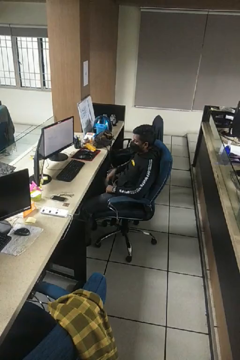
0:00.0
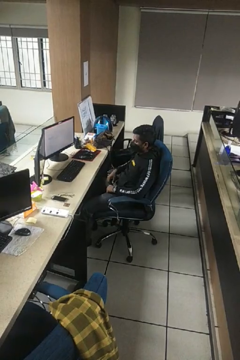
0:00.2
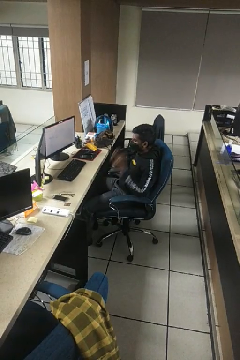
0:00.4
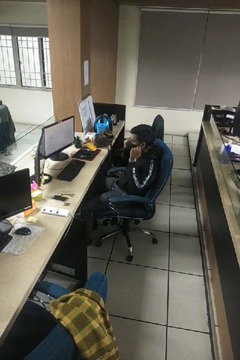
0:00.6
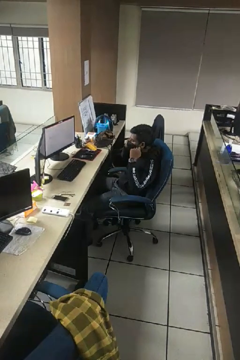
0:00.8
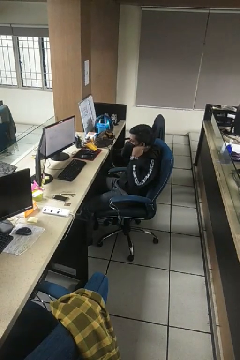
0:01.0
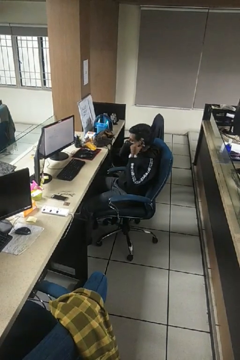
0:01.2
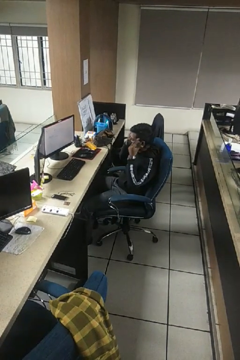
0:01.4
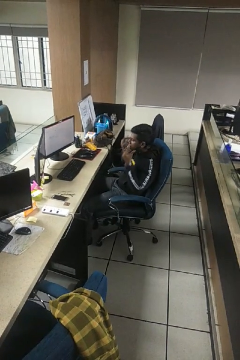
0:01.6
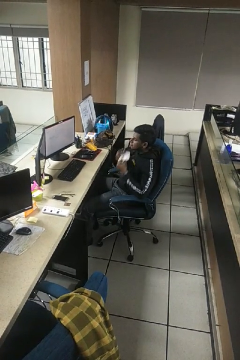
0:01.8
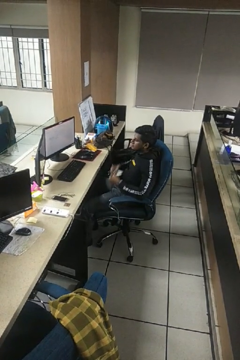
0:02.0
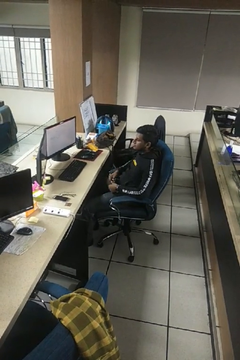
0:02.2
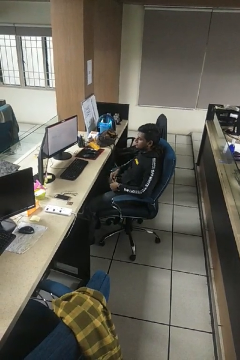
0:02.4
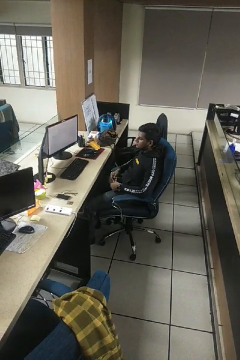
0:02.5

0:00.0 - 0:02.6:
person takes off facemask

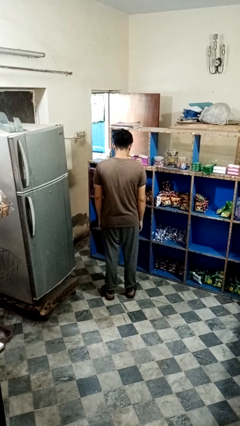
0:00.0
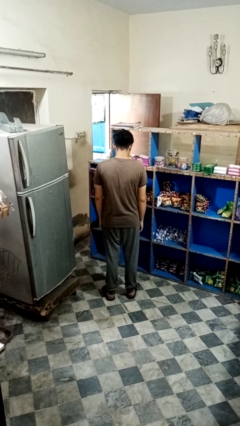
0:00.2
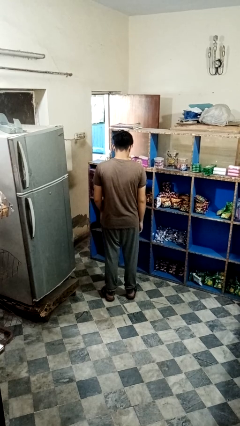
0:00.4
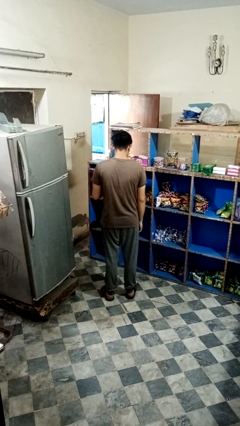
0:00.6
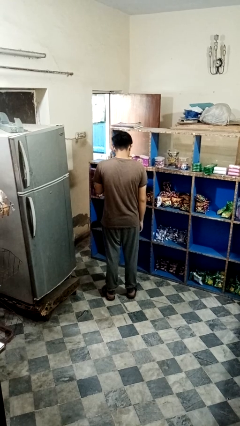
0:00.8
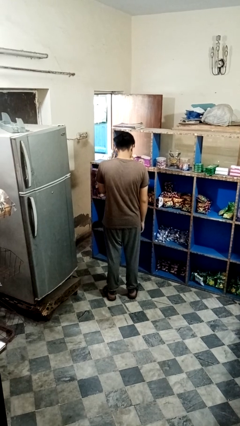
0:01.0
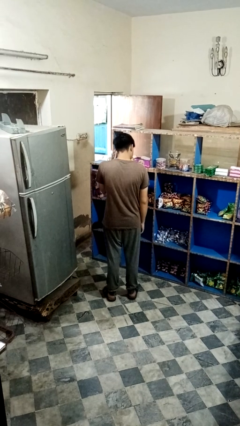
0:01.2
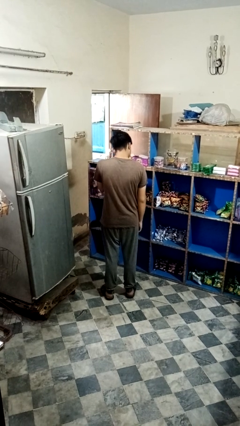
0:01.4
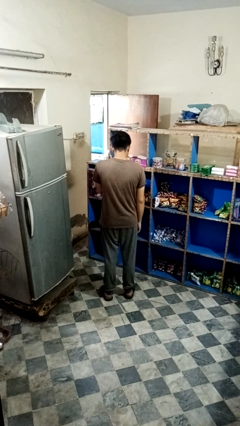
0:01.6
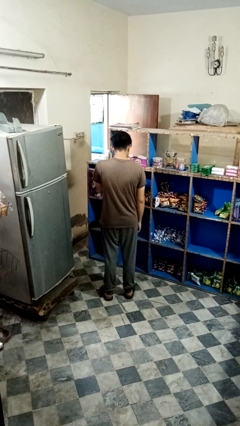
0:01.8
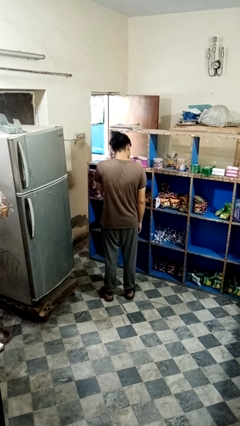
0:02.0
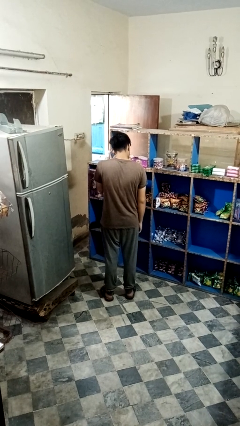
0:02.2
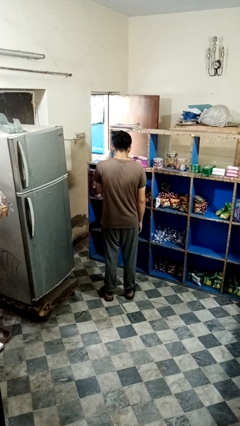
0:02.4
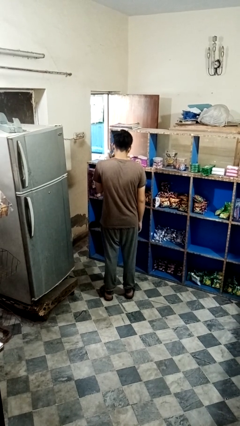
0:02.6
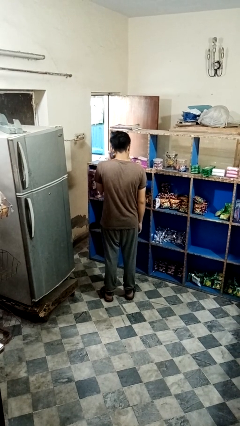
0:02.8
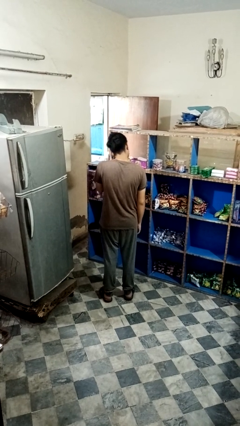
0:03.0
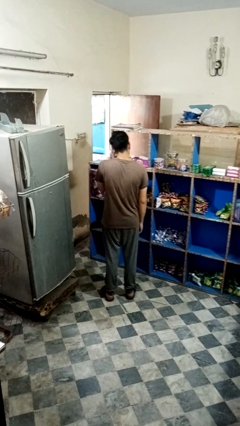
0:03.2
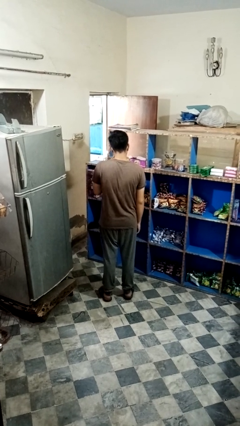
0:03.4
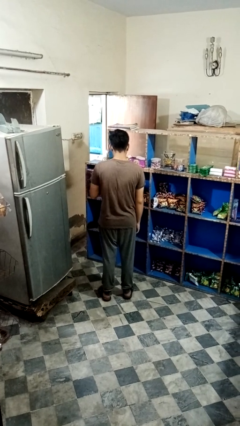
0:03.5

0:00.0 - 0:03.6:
person rubs eyes

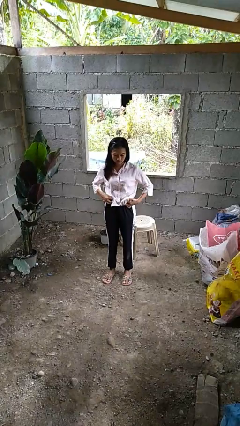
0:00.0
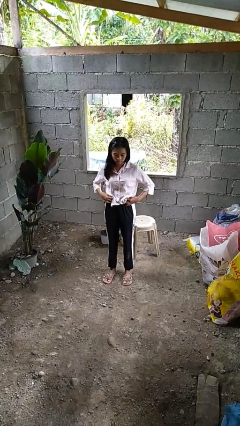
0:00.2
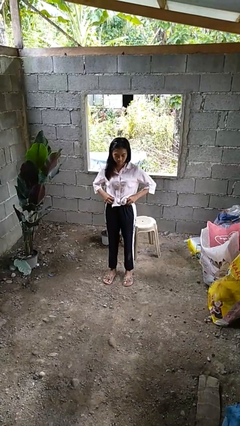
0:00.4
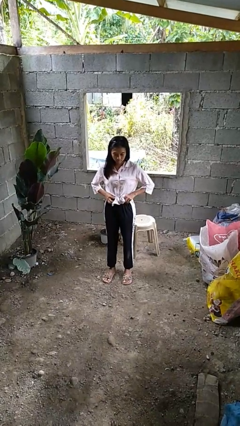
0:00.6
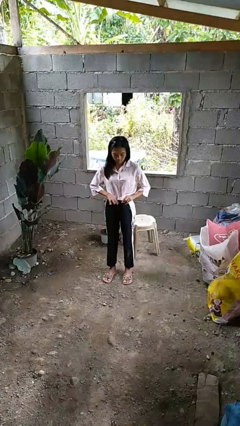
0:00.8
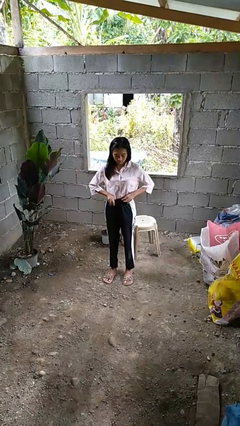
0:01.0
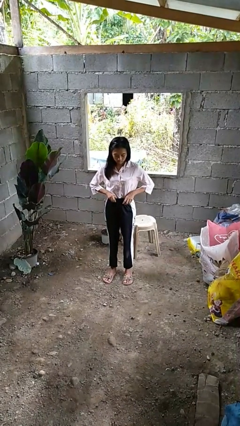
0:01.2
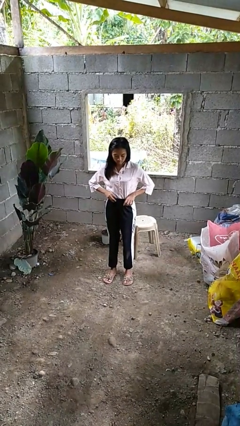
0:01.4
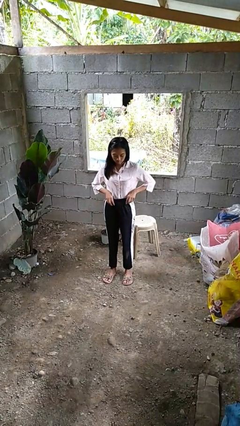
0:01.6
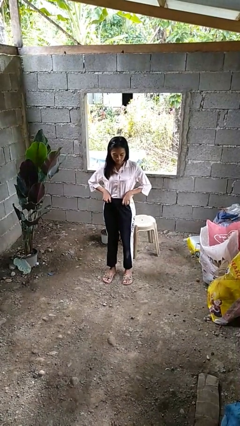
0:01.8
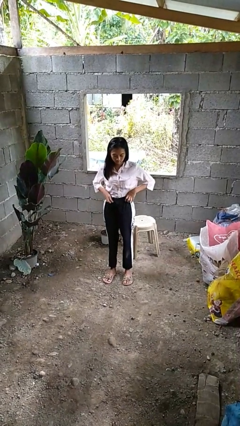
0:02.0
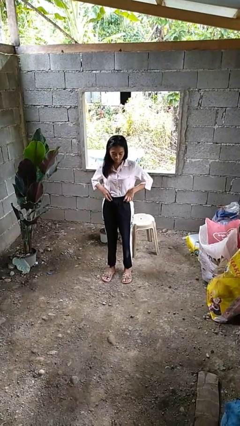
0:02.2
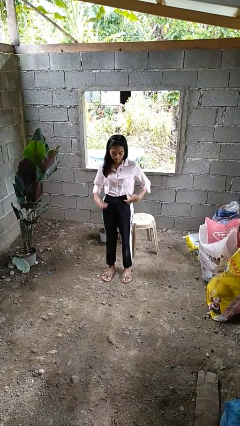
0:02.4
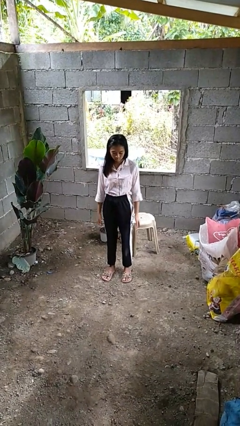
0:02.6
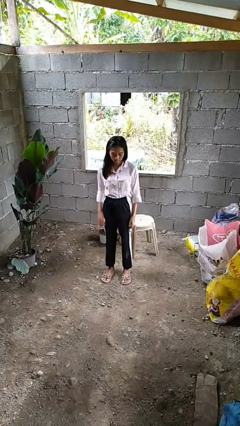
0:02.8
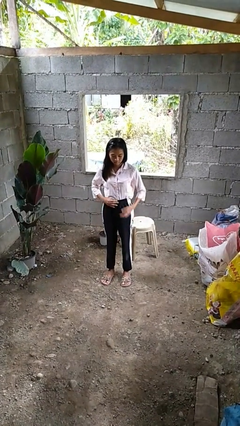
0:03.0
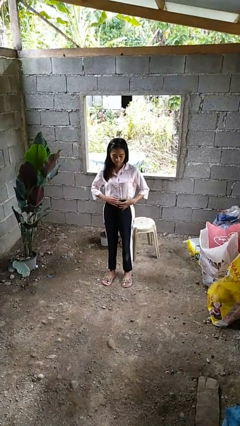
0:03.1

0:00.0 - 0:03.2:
person tucks in shirt

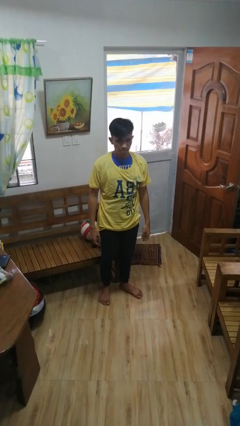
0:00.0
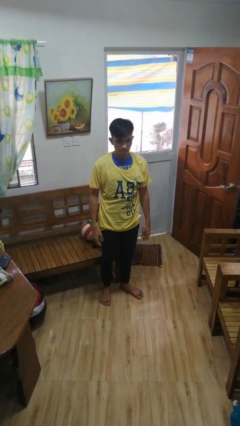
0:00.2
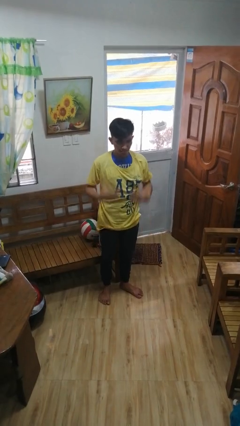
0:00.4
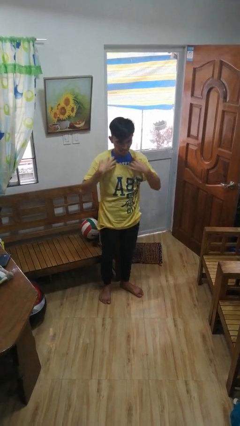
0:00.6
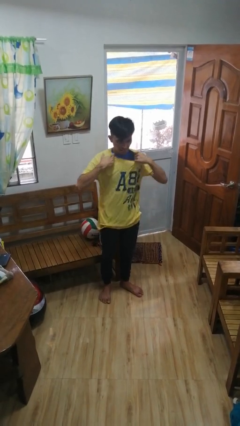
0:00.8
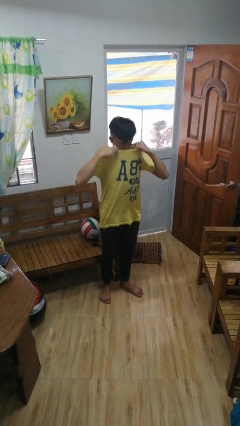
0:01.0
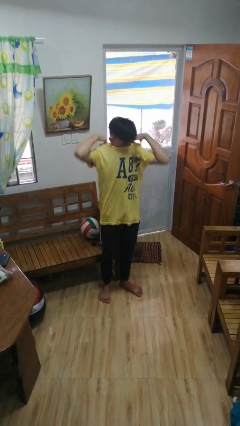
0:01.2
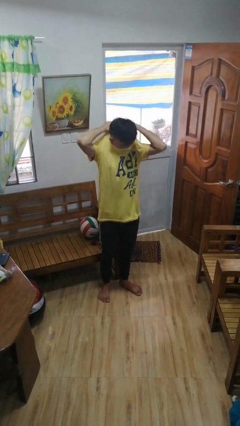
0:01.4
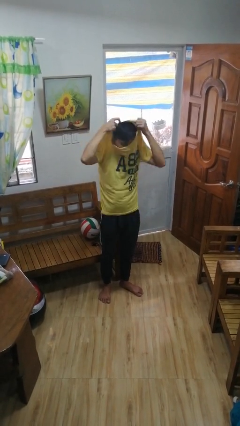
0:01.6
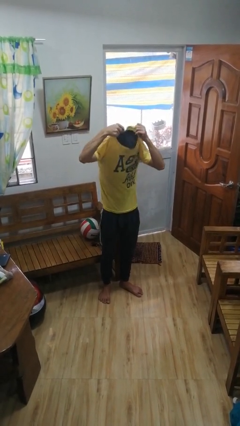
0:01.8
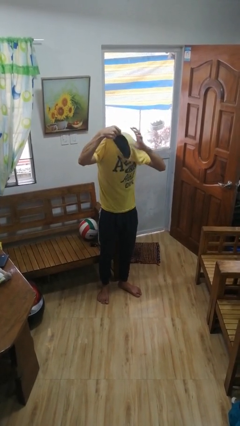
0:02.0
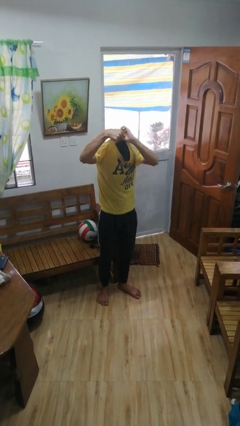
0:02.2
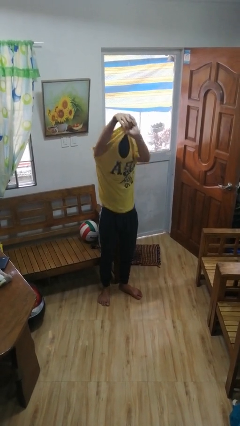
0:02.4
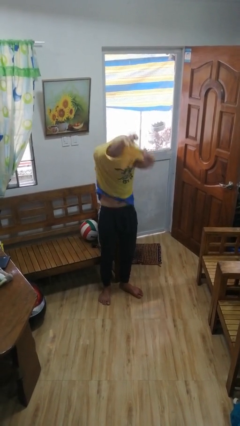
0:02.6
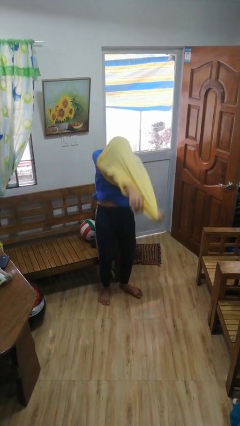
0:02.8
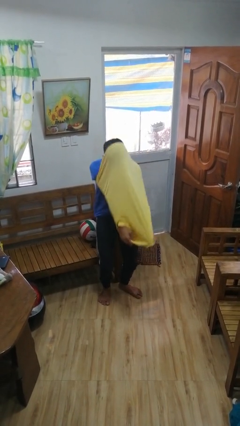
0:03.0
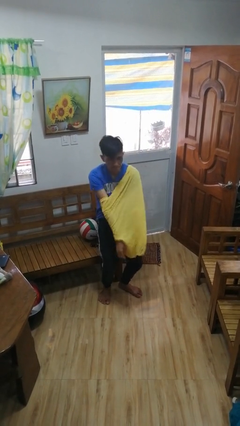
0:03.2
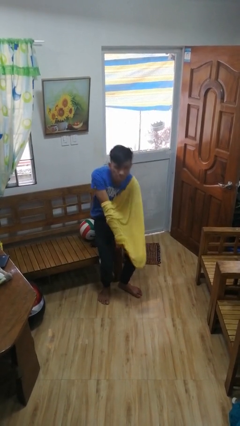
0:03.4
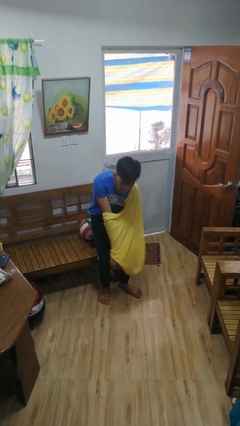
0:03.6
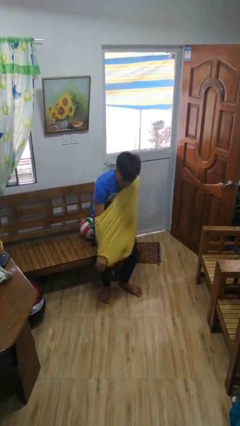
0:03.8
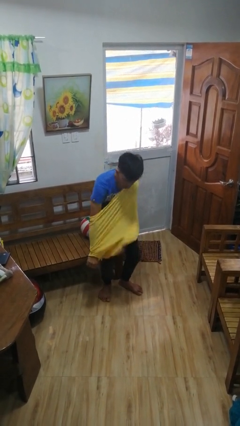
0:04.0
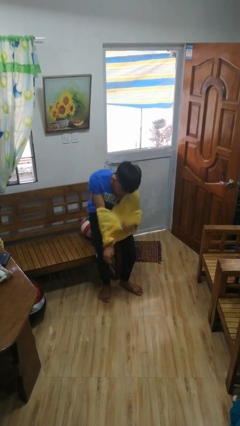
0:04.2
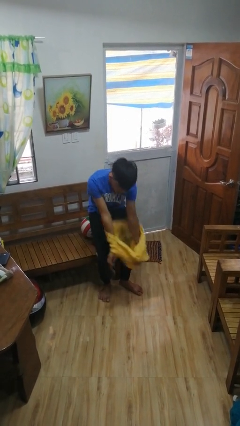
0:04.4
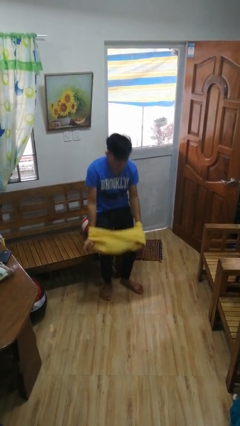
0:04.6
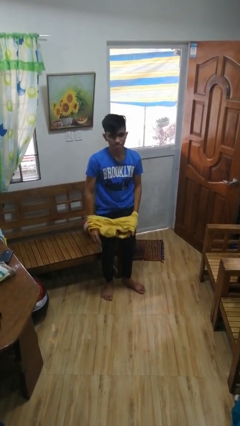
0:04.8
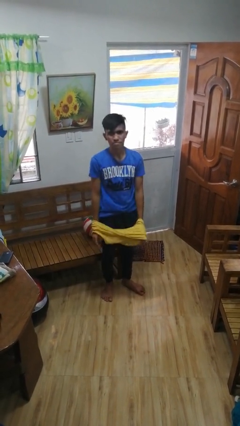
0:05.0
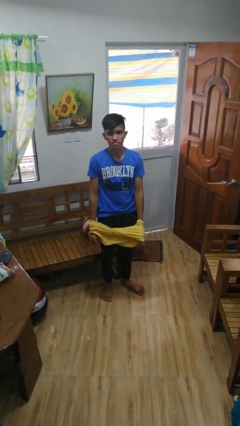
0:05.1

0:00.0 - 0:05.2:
person takes off shirt

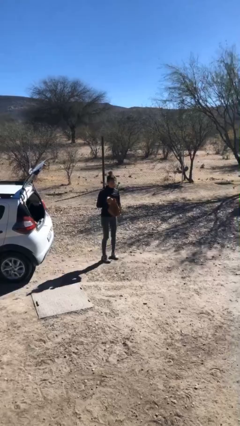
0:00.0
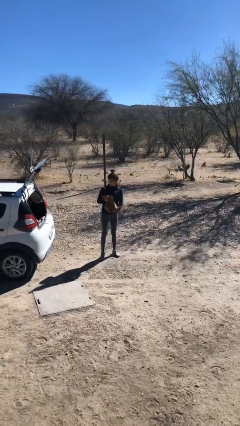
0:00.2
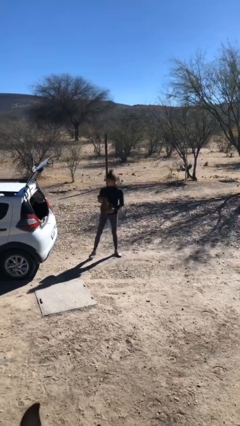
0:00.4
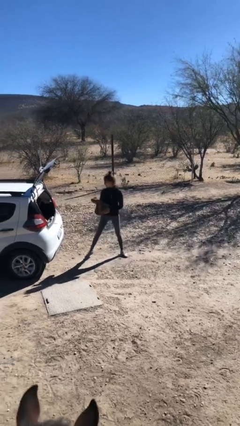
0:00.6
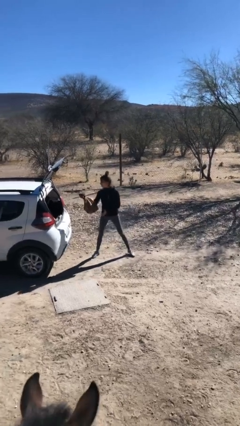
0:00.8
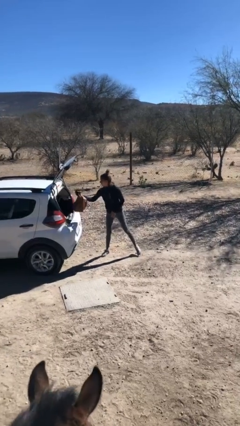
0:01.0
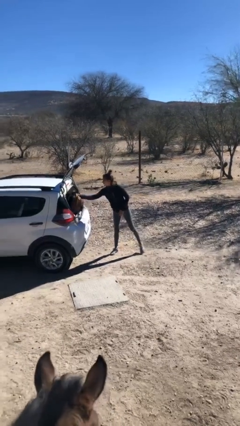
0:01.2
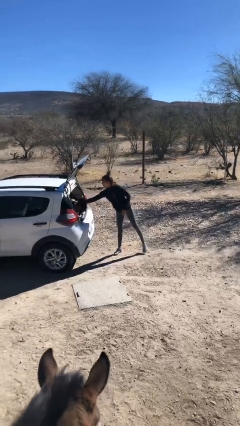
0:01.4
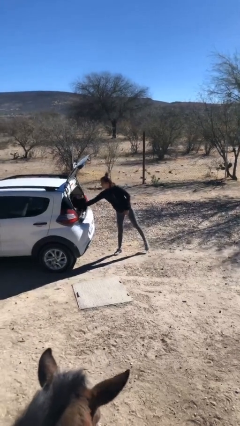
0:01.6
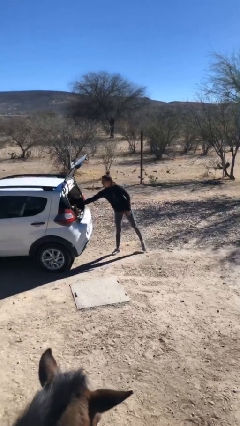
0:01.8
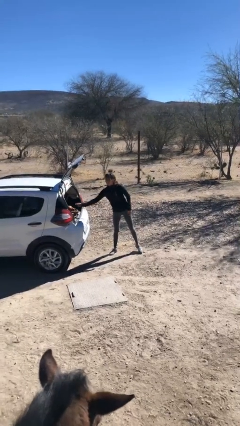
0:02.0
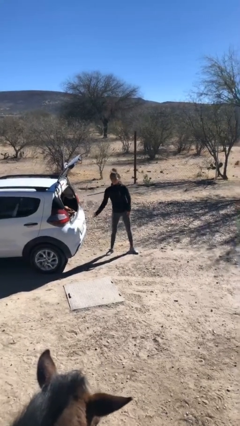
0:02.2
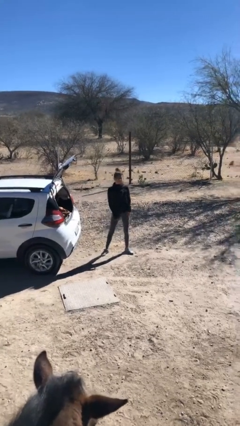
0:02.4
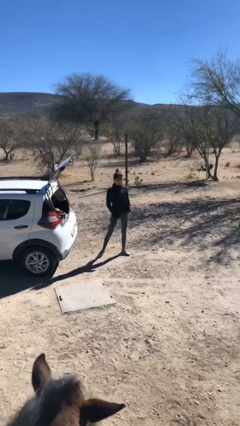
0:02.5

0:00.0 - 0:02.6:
person loads car

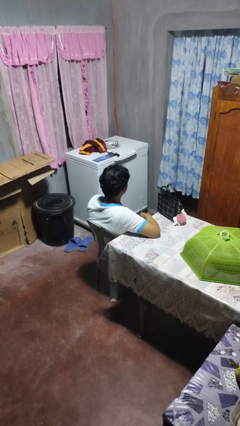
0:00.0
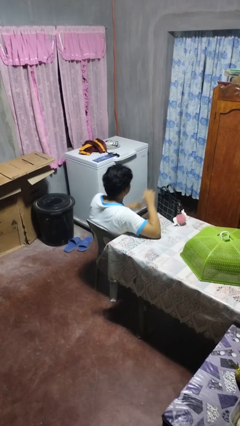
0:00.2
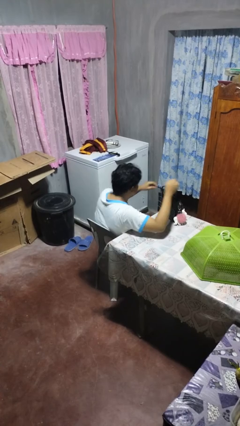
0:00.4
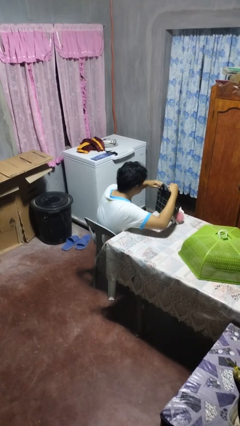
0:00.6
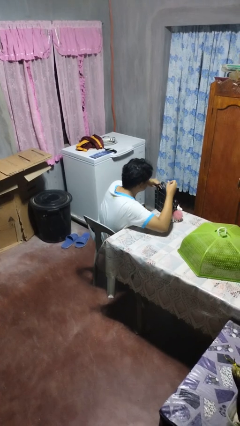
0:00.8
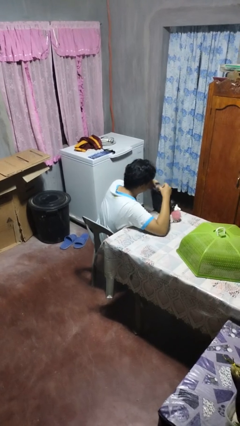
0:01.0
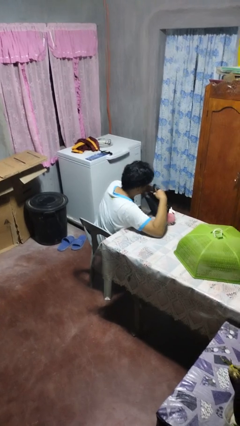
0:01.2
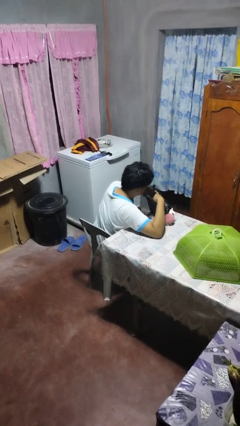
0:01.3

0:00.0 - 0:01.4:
person searches in purse
